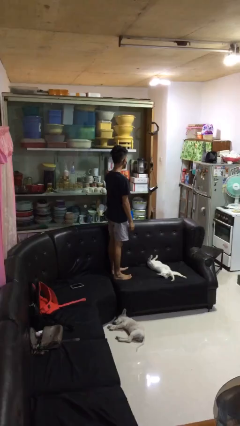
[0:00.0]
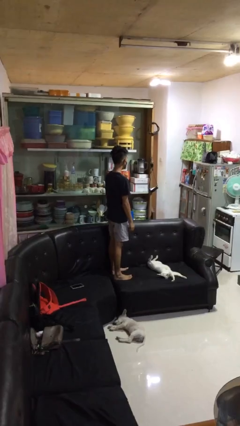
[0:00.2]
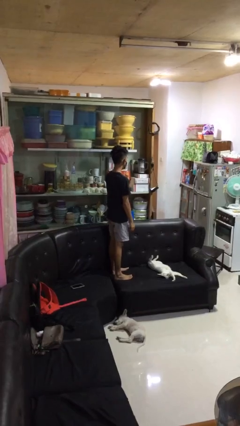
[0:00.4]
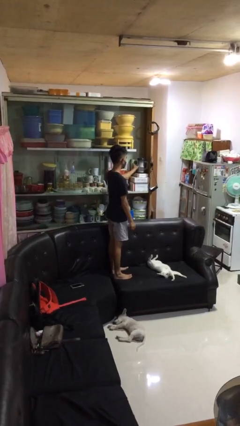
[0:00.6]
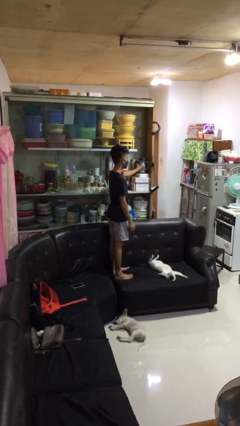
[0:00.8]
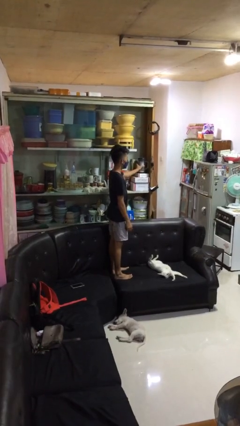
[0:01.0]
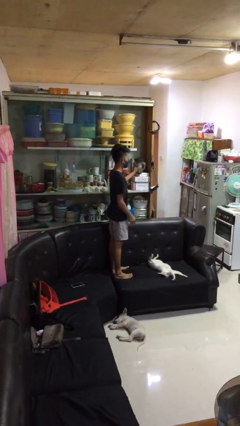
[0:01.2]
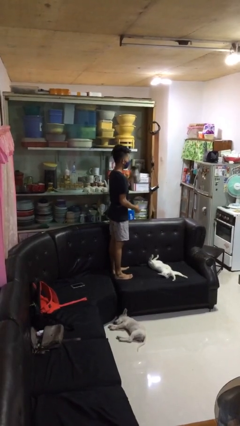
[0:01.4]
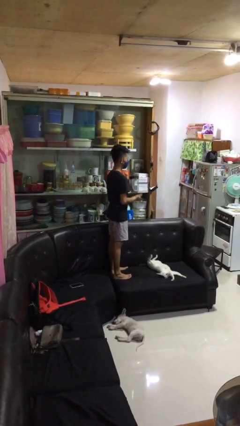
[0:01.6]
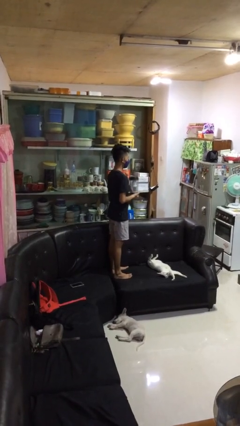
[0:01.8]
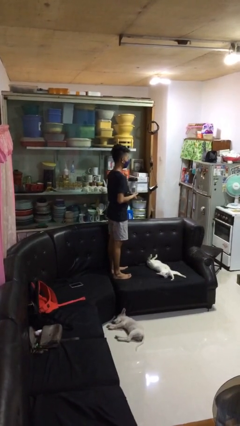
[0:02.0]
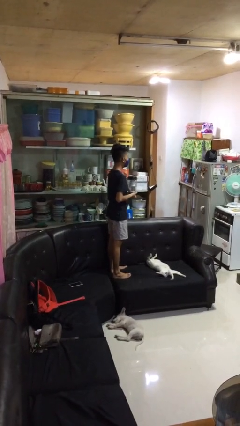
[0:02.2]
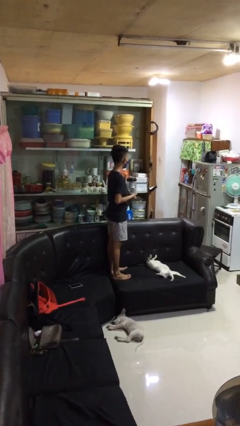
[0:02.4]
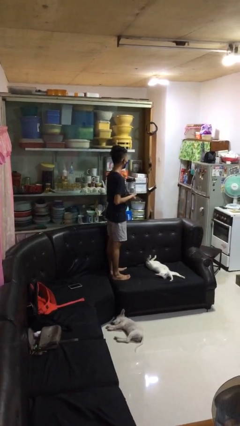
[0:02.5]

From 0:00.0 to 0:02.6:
person picks up object from cabinet

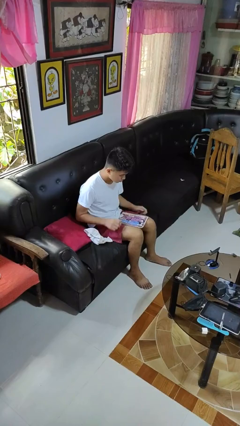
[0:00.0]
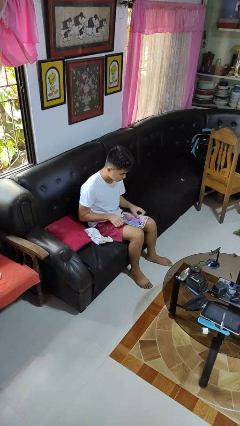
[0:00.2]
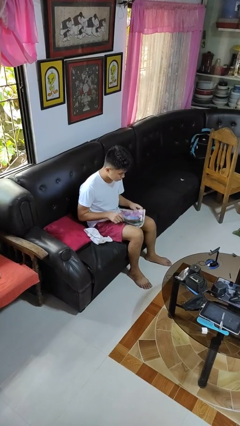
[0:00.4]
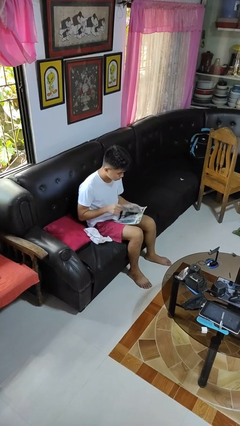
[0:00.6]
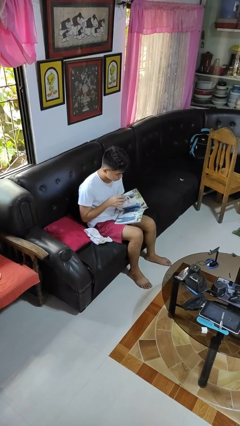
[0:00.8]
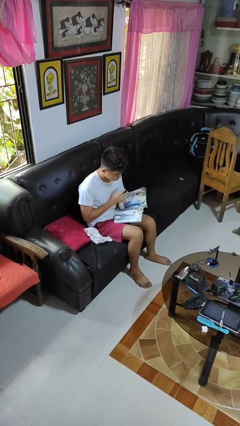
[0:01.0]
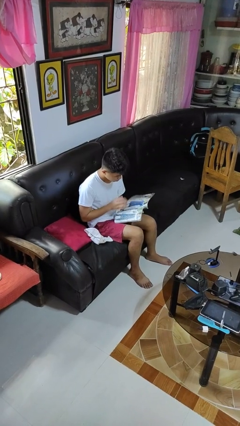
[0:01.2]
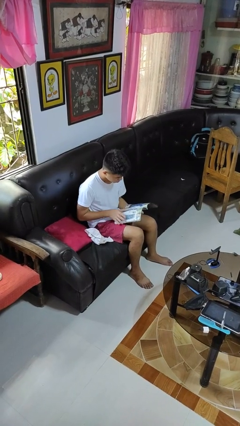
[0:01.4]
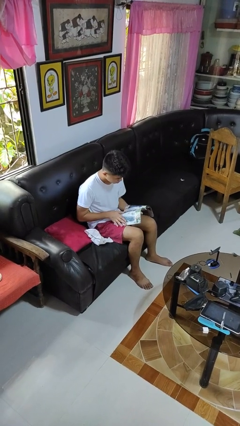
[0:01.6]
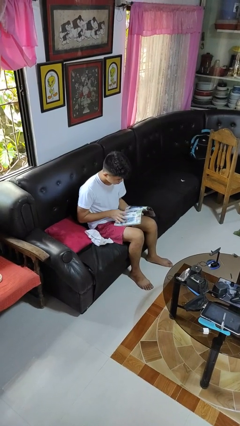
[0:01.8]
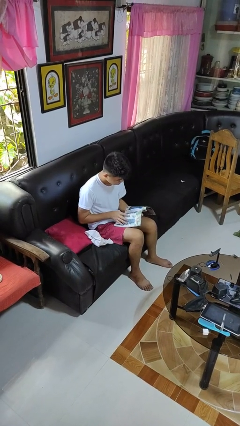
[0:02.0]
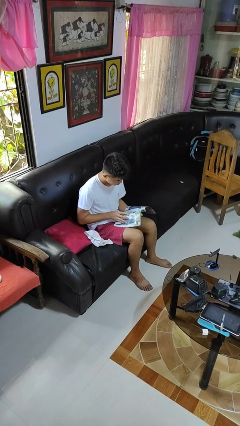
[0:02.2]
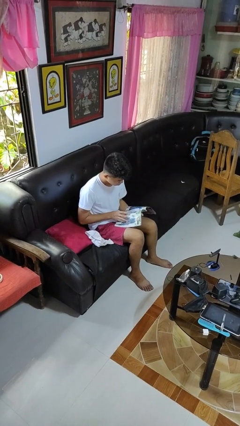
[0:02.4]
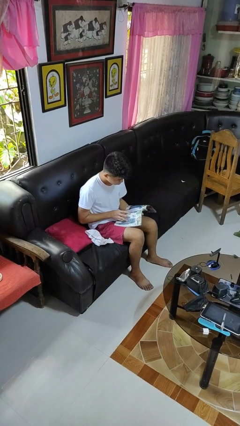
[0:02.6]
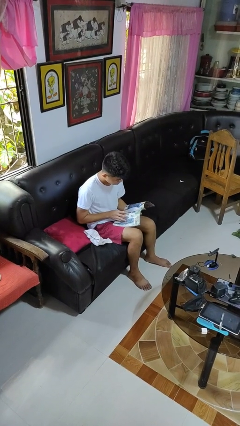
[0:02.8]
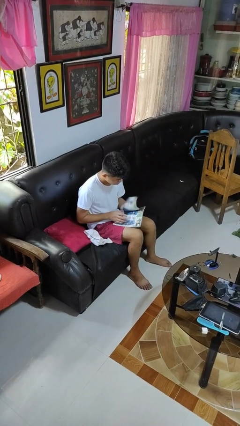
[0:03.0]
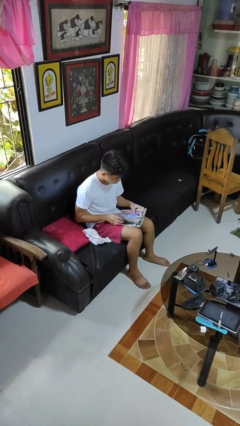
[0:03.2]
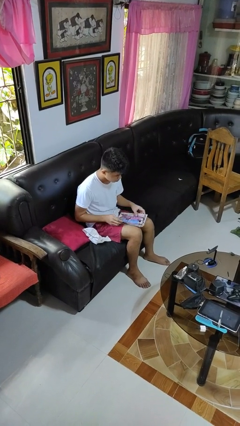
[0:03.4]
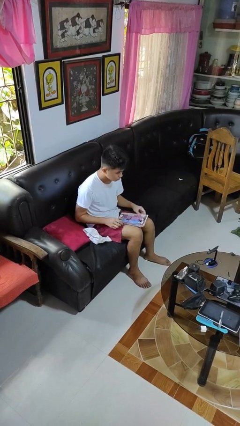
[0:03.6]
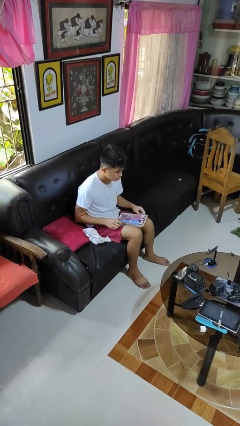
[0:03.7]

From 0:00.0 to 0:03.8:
person reads magazine

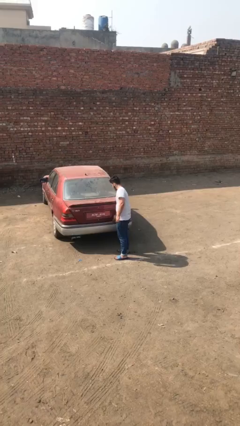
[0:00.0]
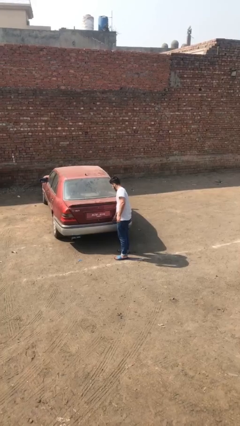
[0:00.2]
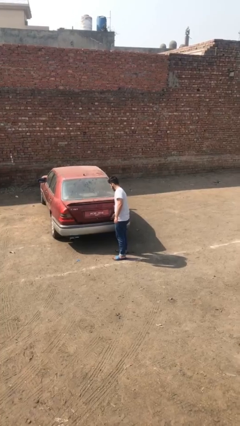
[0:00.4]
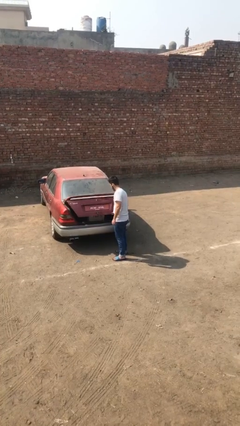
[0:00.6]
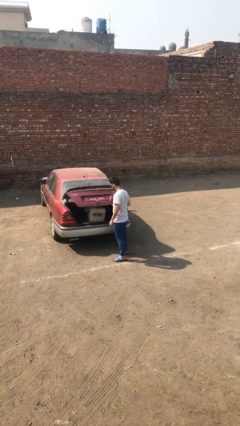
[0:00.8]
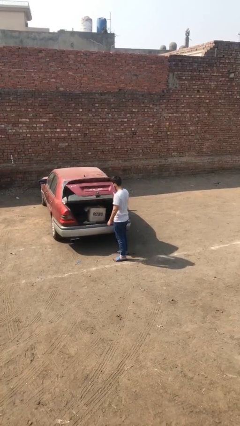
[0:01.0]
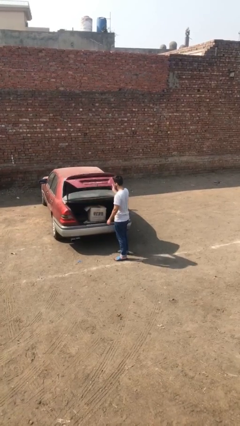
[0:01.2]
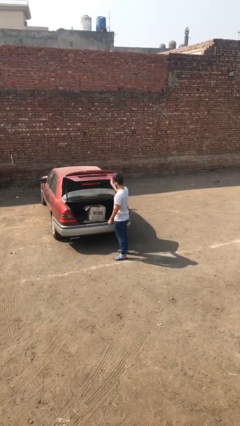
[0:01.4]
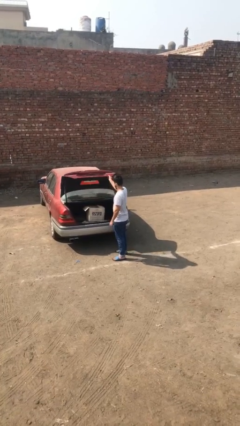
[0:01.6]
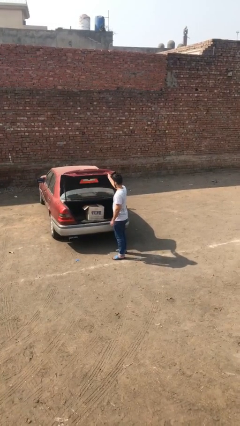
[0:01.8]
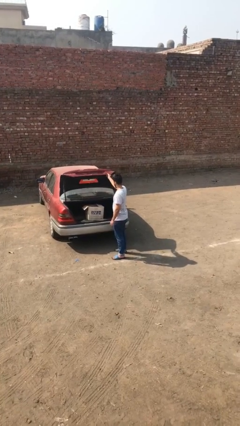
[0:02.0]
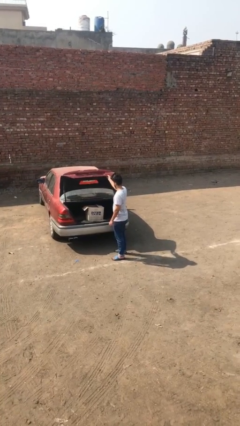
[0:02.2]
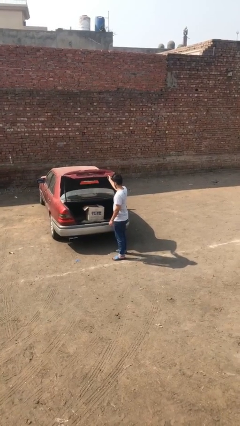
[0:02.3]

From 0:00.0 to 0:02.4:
person opens car trunk

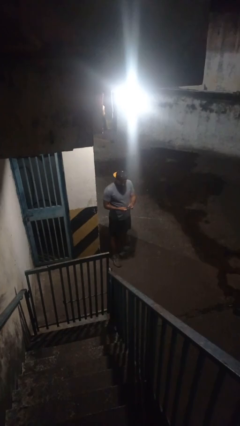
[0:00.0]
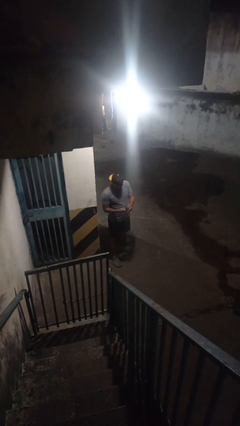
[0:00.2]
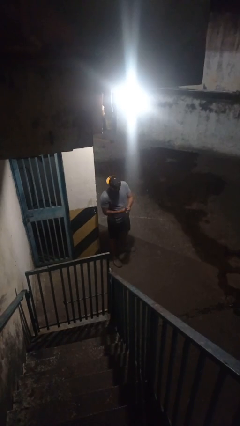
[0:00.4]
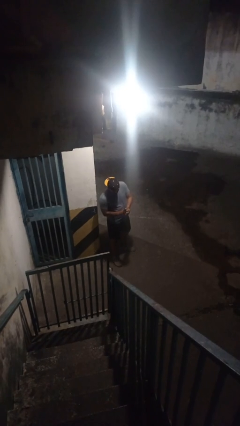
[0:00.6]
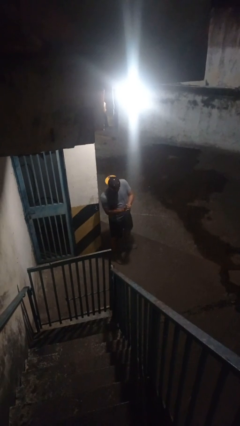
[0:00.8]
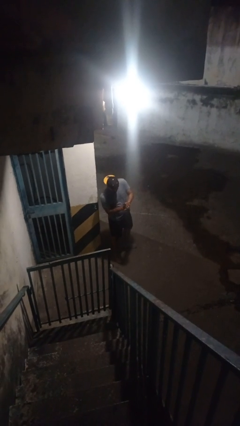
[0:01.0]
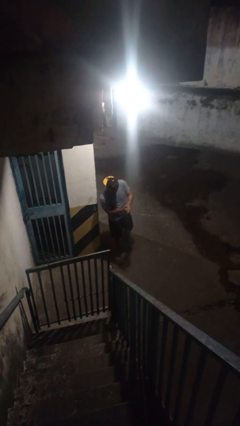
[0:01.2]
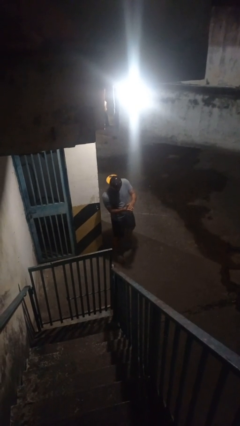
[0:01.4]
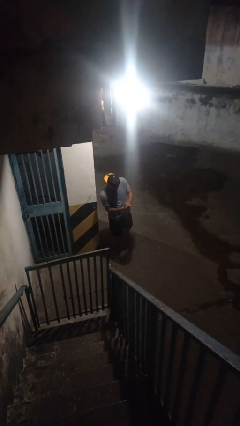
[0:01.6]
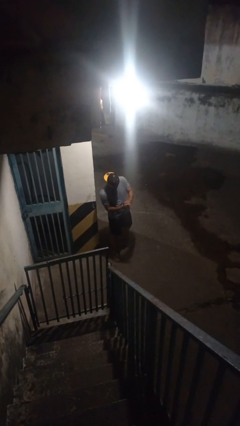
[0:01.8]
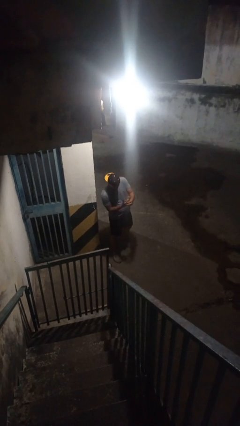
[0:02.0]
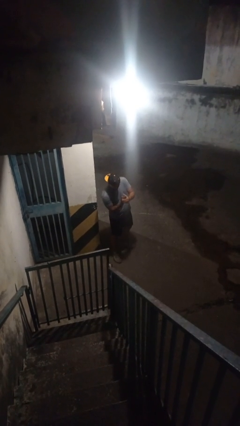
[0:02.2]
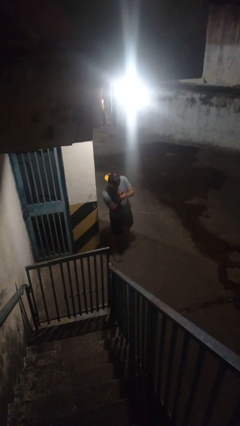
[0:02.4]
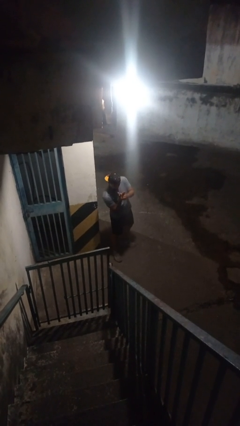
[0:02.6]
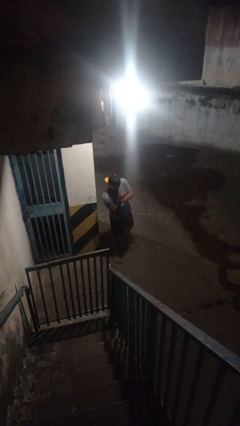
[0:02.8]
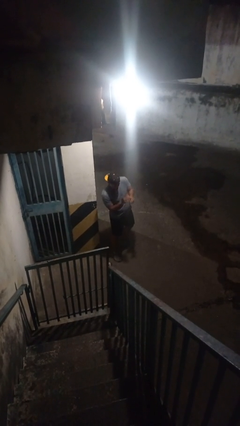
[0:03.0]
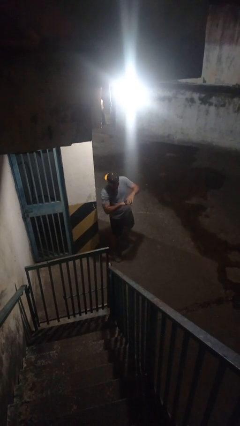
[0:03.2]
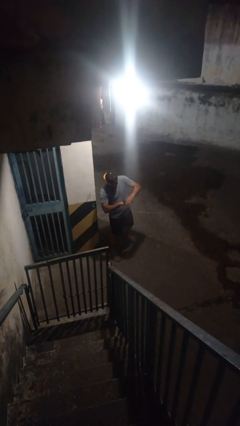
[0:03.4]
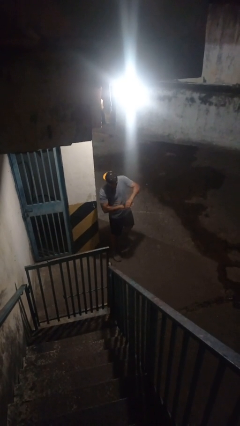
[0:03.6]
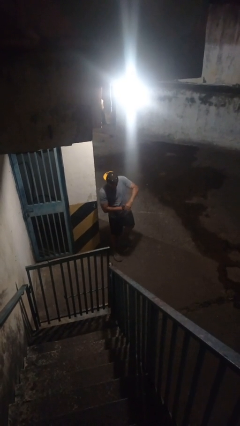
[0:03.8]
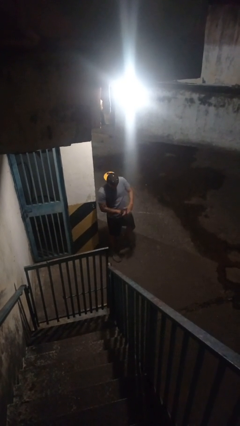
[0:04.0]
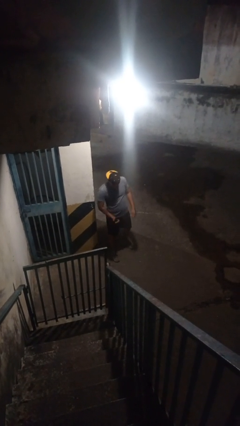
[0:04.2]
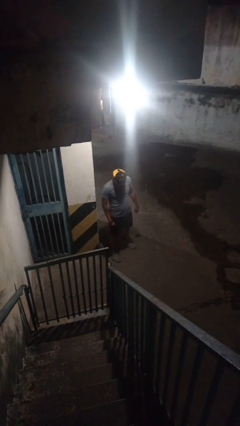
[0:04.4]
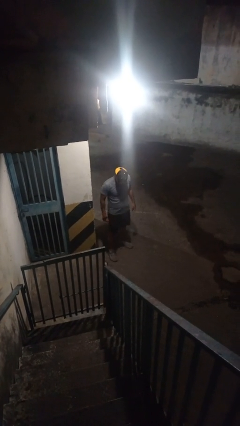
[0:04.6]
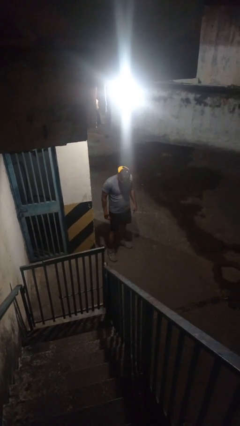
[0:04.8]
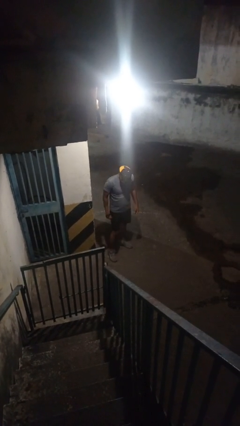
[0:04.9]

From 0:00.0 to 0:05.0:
person puts on wristwatch

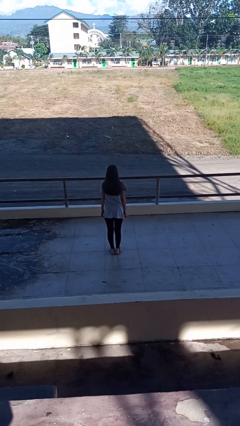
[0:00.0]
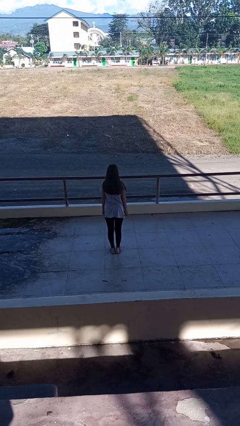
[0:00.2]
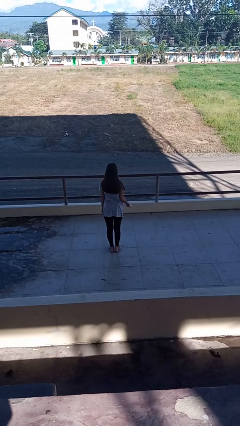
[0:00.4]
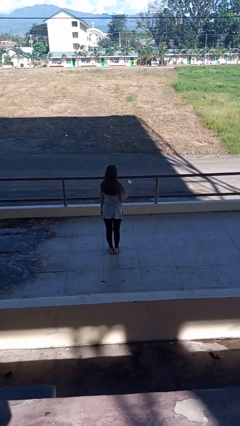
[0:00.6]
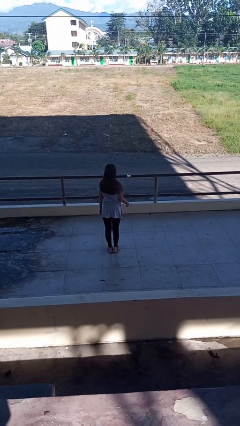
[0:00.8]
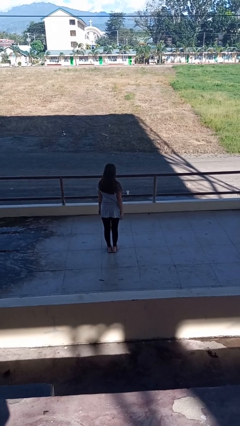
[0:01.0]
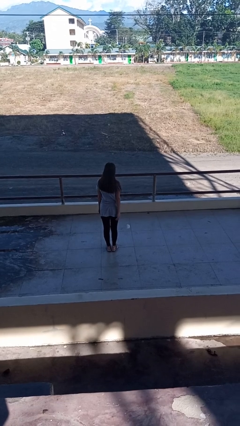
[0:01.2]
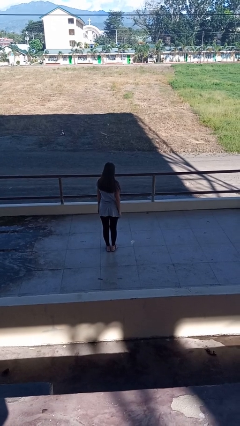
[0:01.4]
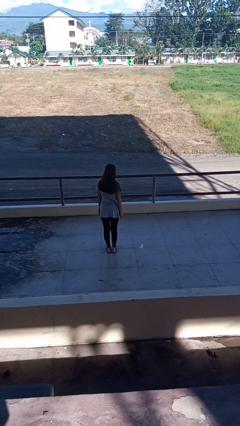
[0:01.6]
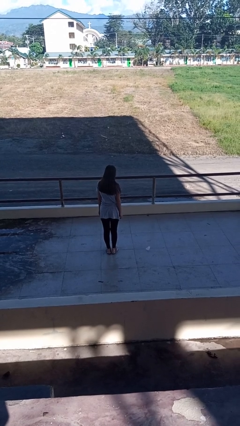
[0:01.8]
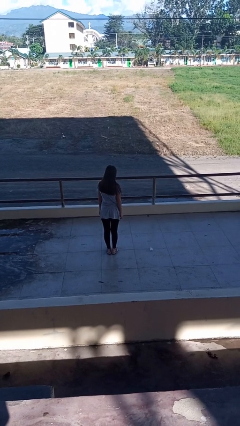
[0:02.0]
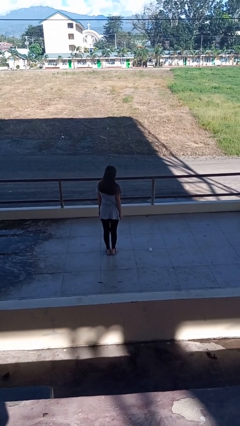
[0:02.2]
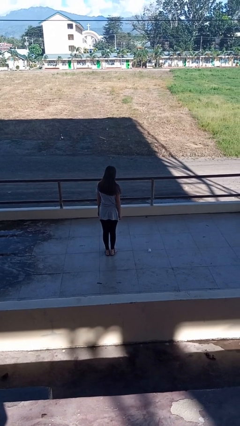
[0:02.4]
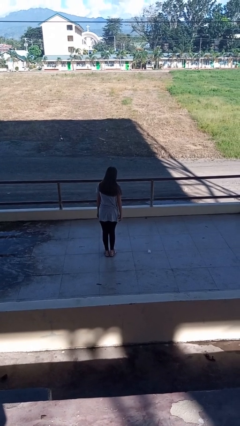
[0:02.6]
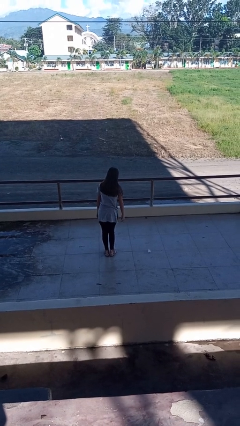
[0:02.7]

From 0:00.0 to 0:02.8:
person throws object into air

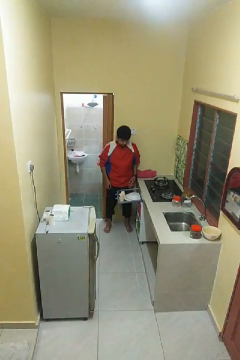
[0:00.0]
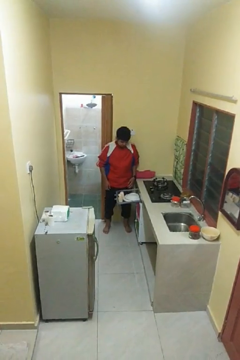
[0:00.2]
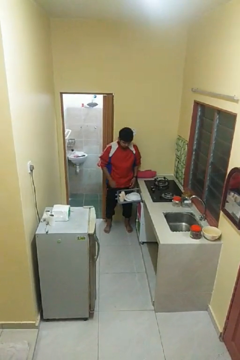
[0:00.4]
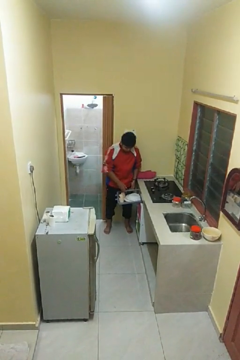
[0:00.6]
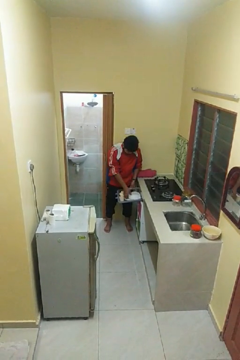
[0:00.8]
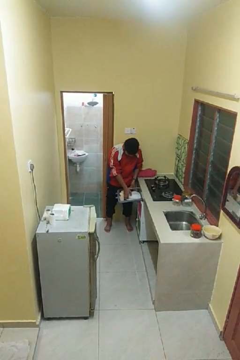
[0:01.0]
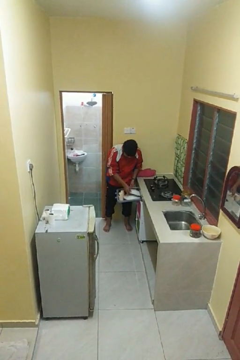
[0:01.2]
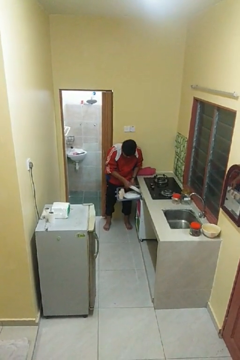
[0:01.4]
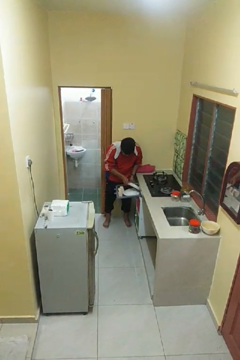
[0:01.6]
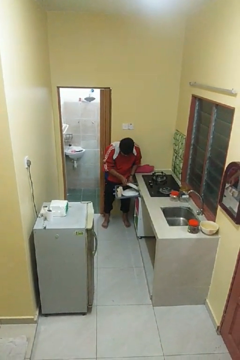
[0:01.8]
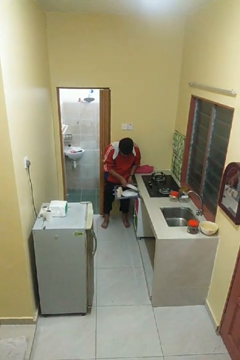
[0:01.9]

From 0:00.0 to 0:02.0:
person searches in kitchen drawer
